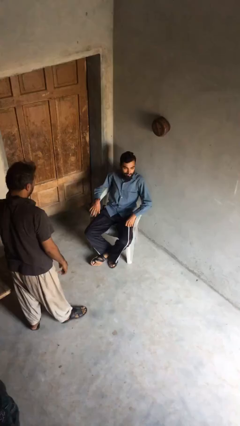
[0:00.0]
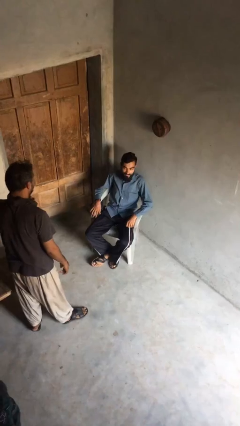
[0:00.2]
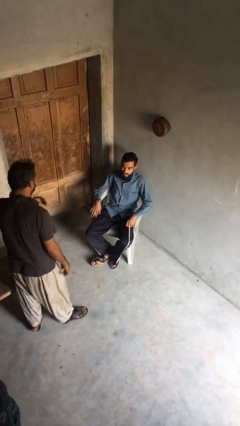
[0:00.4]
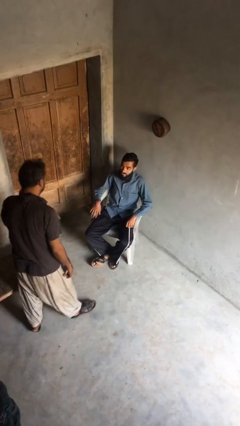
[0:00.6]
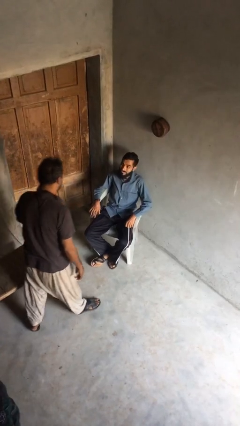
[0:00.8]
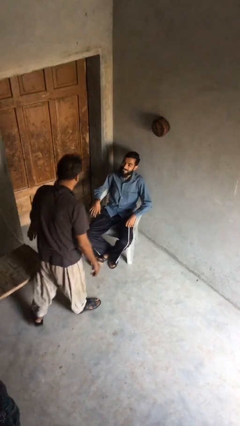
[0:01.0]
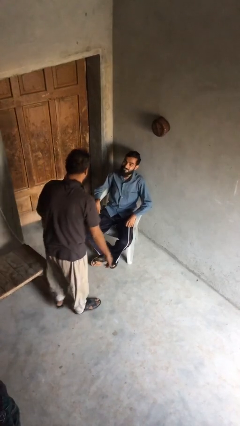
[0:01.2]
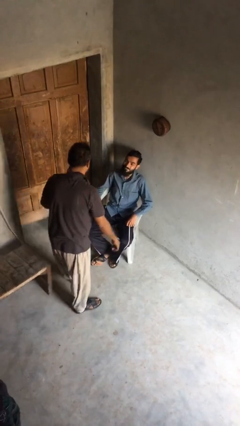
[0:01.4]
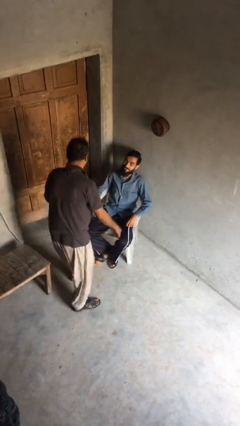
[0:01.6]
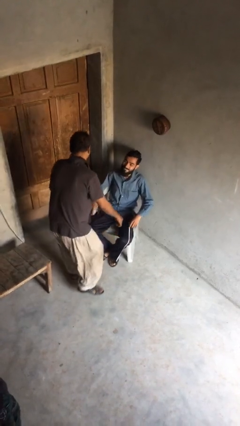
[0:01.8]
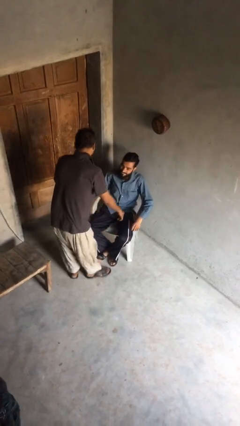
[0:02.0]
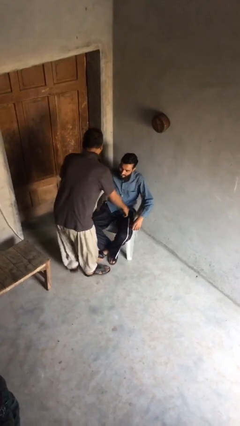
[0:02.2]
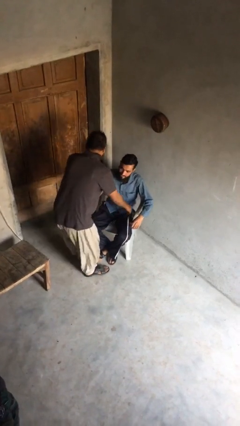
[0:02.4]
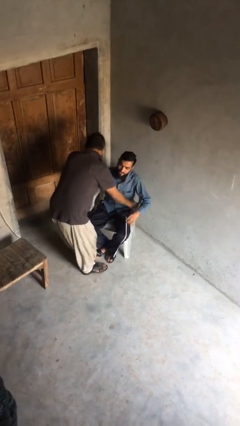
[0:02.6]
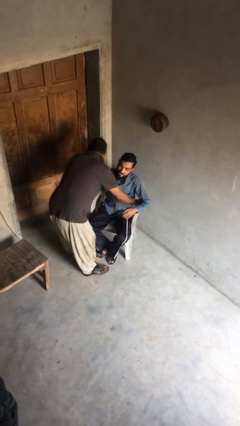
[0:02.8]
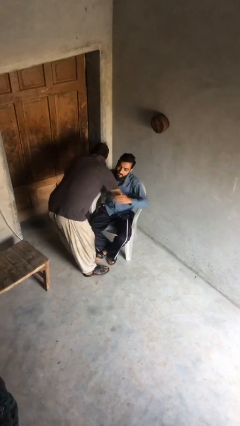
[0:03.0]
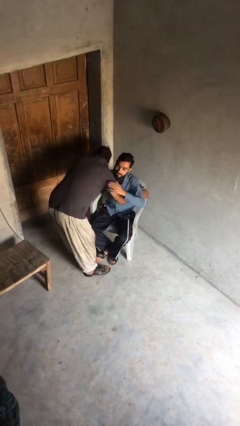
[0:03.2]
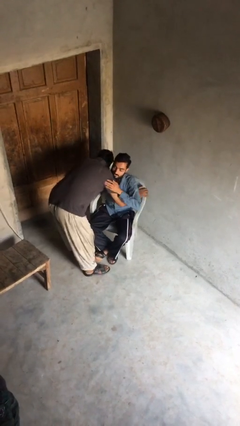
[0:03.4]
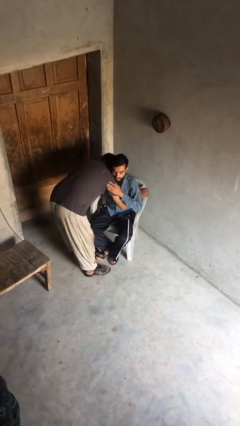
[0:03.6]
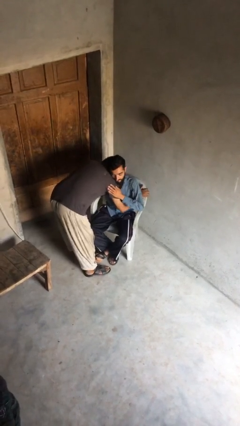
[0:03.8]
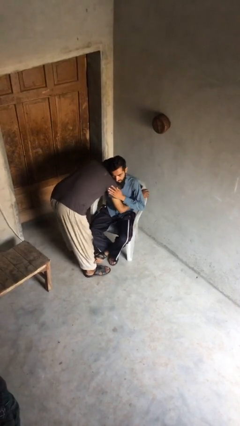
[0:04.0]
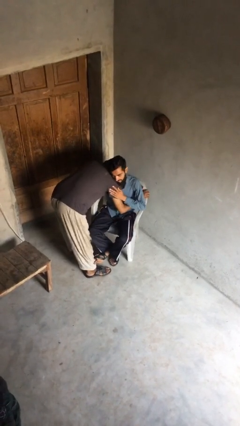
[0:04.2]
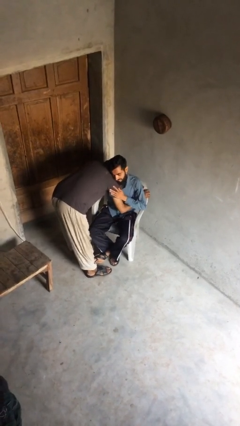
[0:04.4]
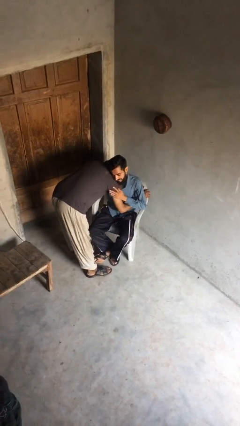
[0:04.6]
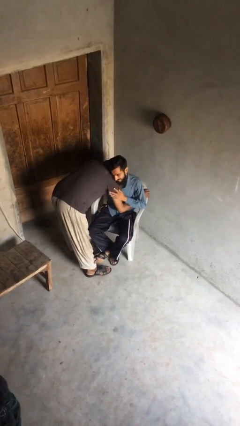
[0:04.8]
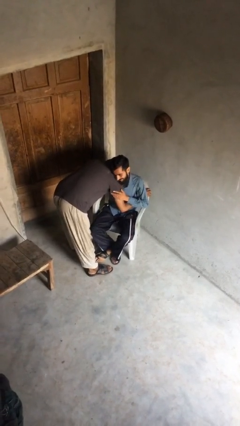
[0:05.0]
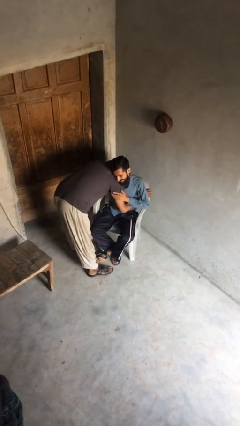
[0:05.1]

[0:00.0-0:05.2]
person embraces person

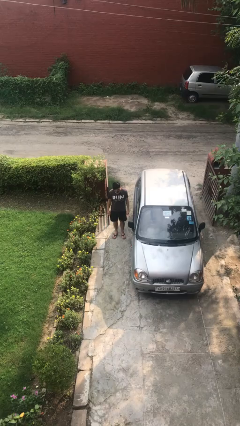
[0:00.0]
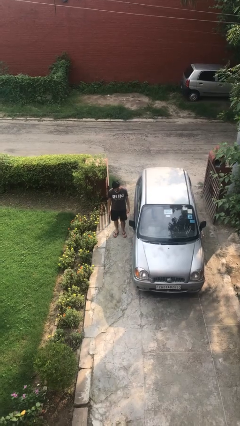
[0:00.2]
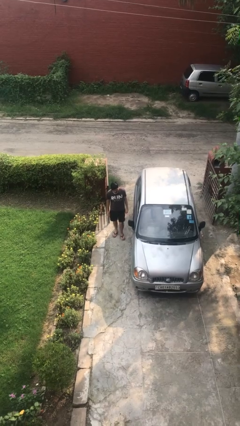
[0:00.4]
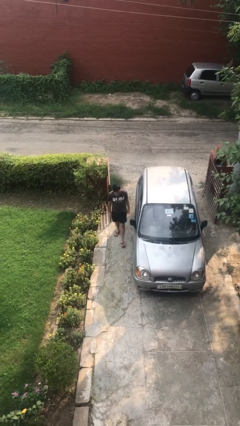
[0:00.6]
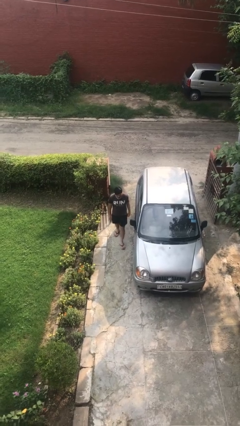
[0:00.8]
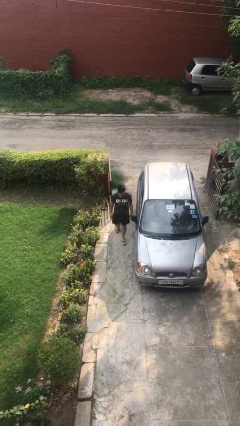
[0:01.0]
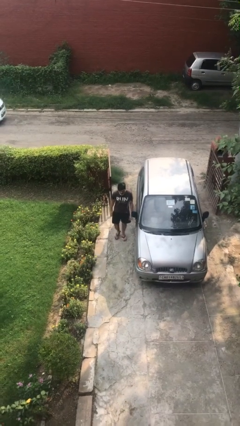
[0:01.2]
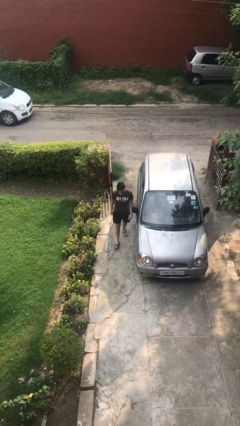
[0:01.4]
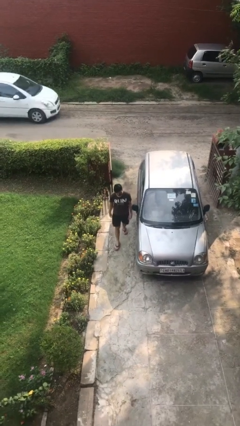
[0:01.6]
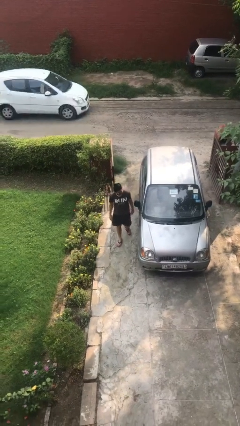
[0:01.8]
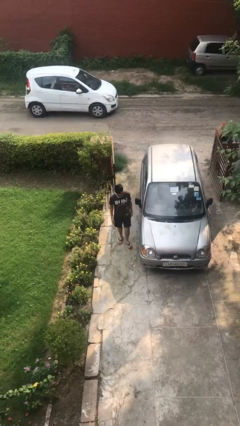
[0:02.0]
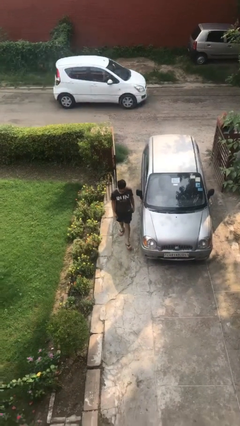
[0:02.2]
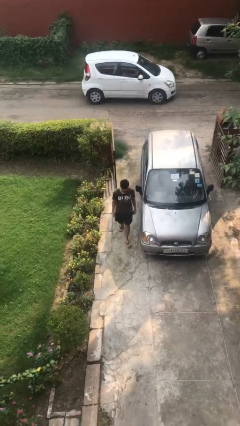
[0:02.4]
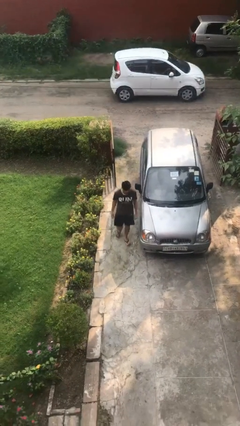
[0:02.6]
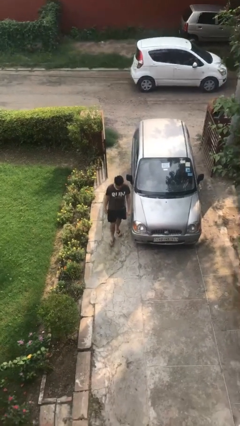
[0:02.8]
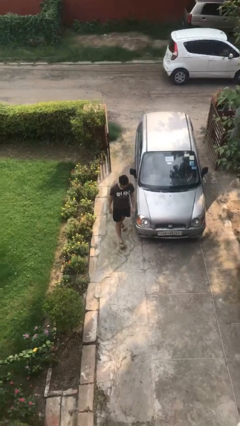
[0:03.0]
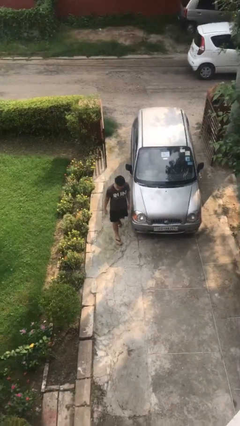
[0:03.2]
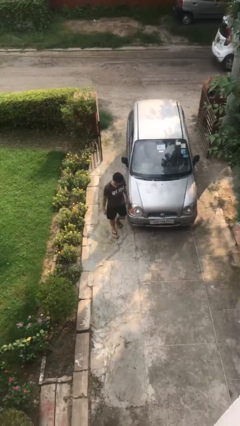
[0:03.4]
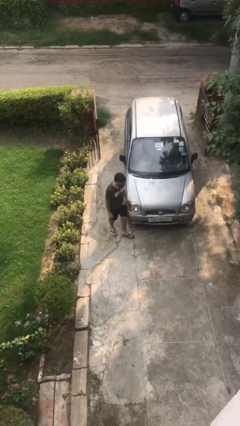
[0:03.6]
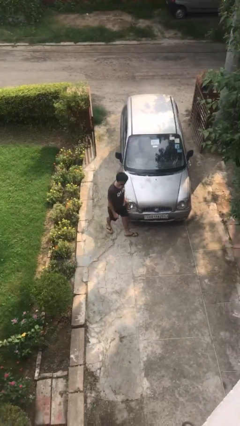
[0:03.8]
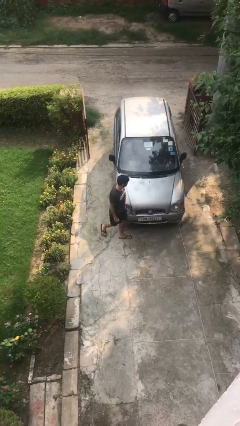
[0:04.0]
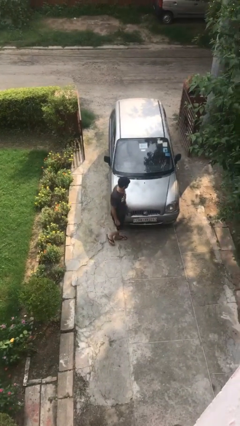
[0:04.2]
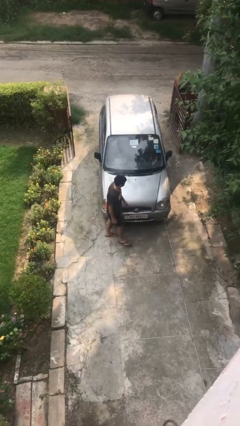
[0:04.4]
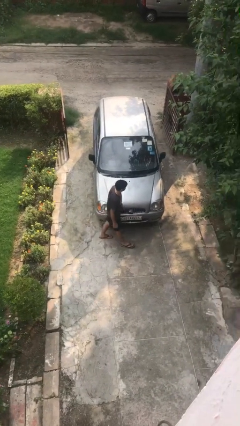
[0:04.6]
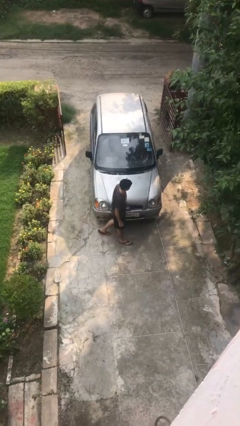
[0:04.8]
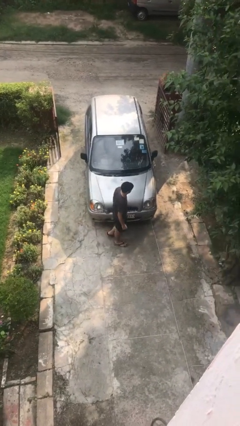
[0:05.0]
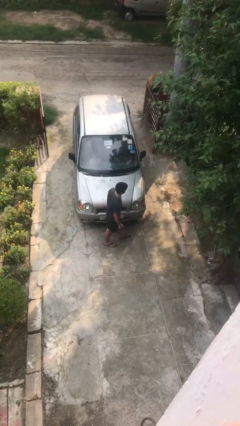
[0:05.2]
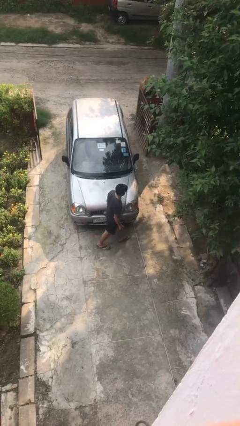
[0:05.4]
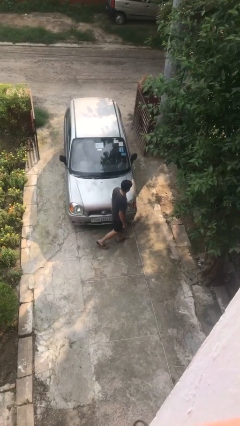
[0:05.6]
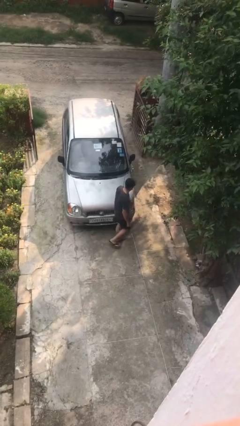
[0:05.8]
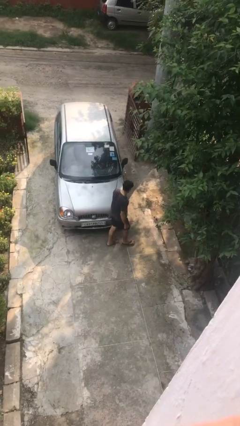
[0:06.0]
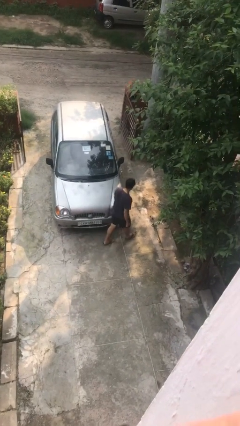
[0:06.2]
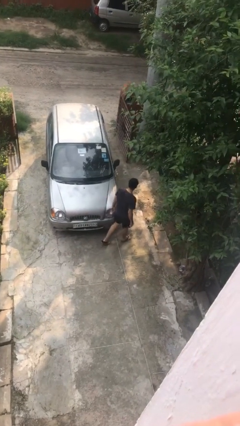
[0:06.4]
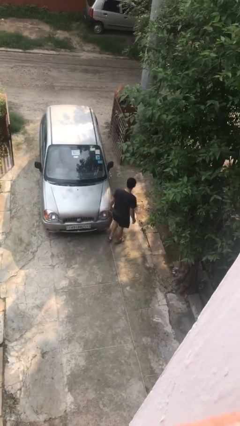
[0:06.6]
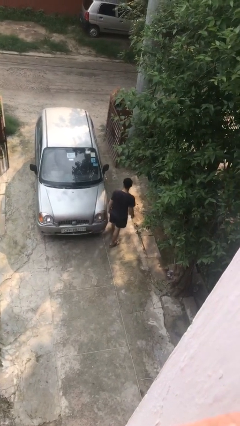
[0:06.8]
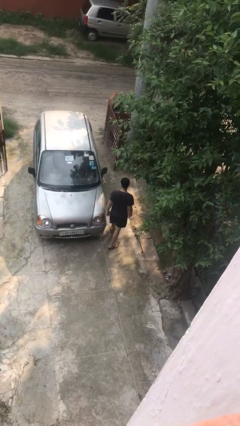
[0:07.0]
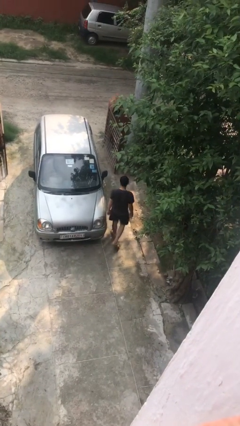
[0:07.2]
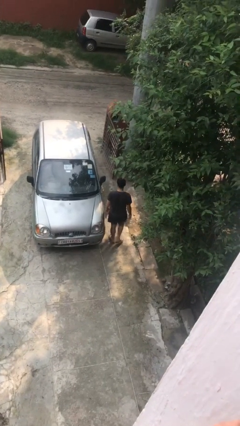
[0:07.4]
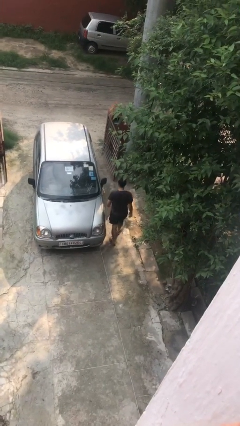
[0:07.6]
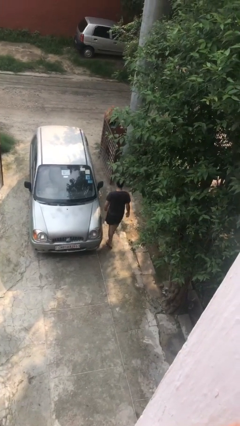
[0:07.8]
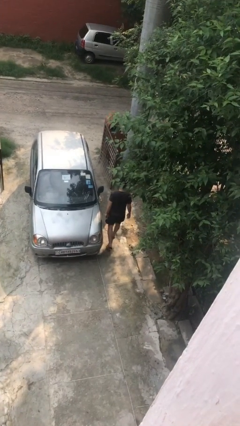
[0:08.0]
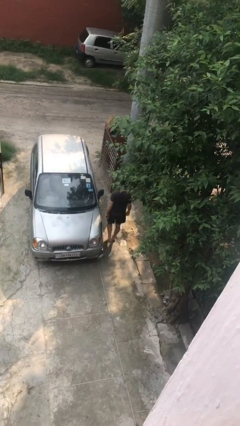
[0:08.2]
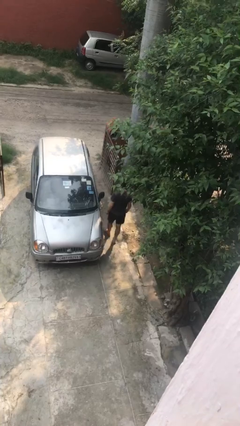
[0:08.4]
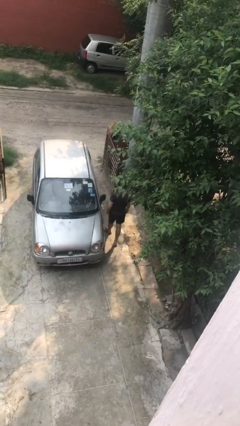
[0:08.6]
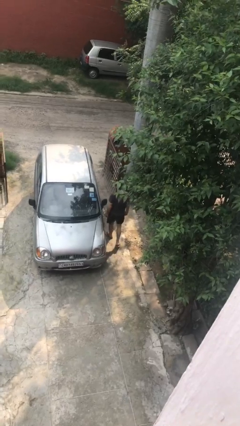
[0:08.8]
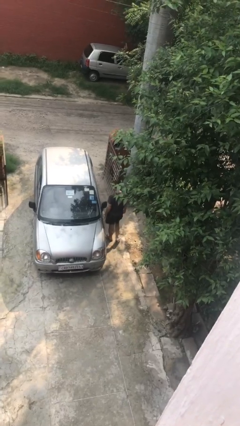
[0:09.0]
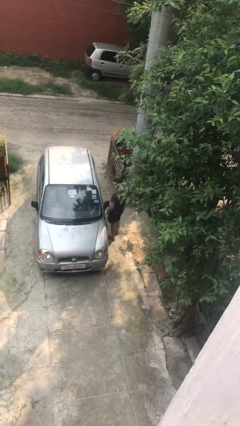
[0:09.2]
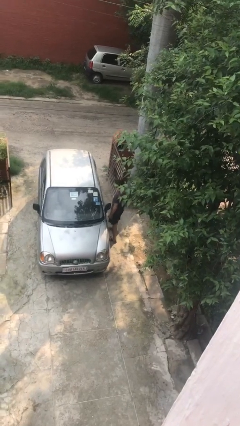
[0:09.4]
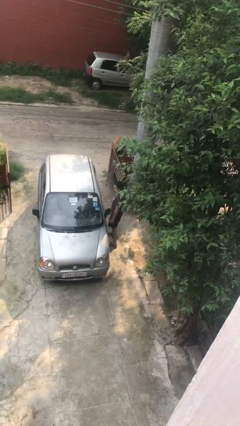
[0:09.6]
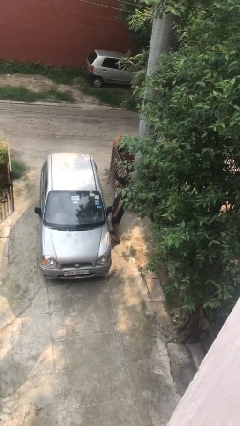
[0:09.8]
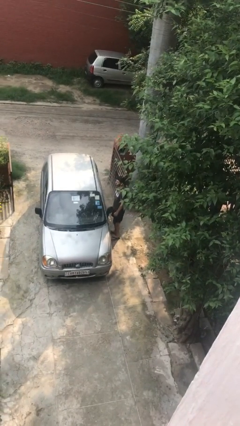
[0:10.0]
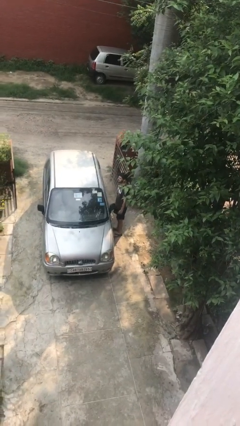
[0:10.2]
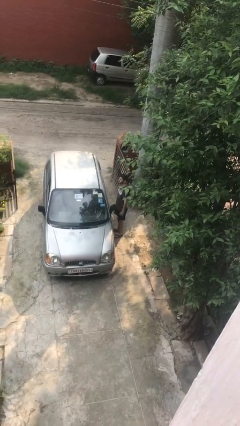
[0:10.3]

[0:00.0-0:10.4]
person walks around car

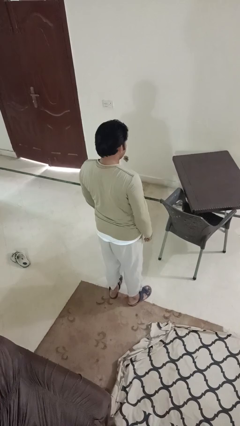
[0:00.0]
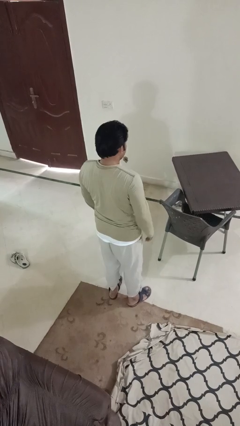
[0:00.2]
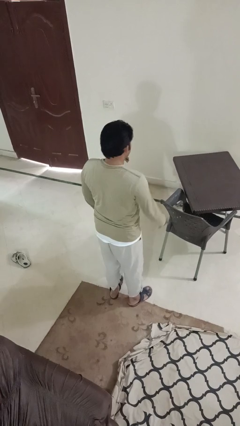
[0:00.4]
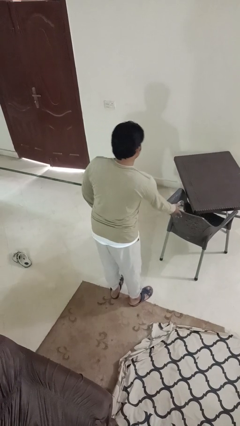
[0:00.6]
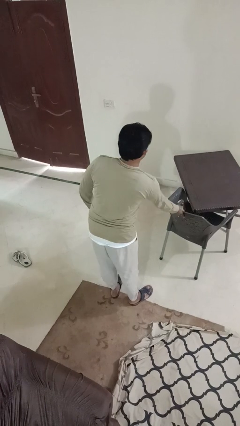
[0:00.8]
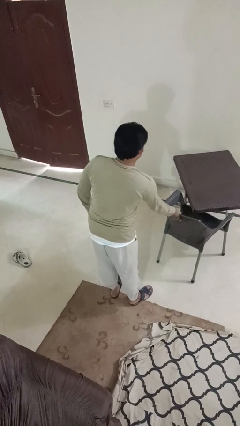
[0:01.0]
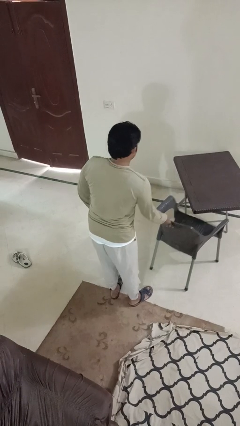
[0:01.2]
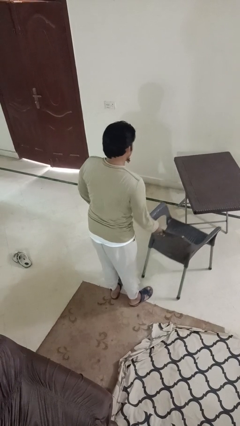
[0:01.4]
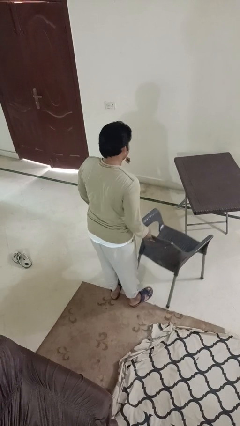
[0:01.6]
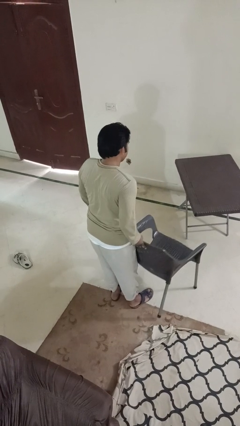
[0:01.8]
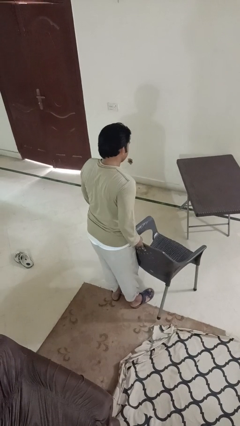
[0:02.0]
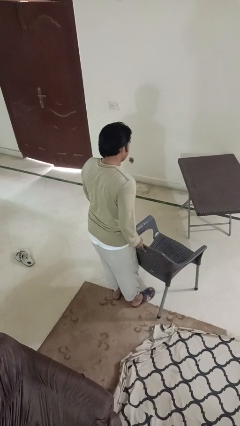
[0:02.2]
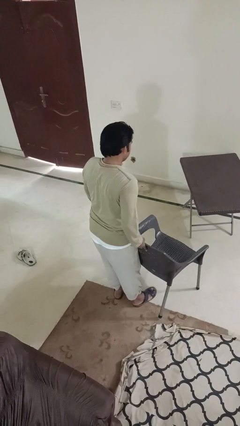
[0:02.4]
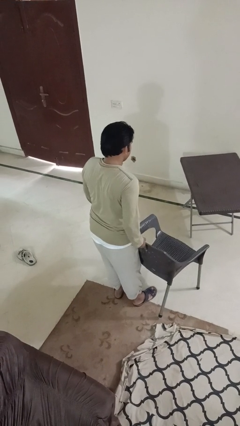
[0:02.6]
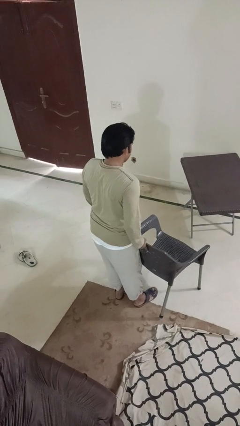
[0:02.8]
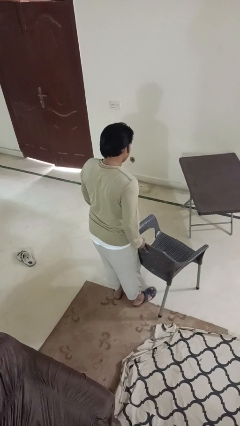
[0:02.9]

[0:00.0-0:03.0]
person pulls out chair
